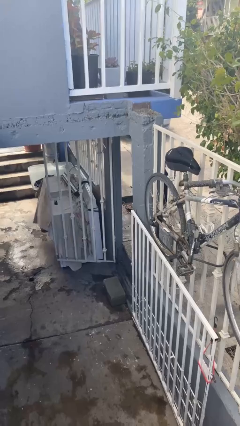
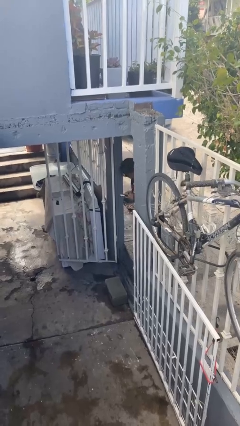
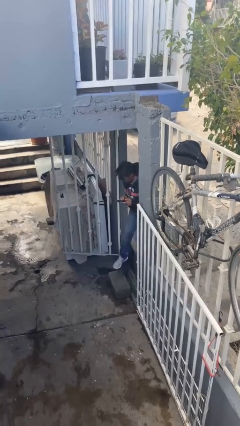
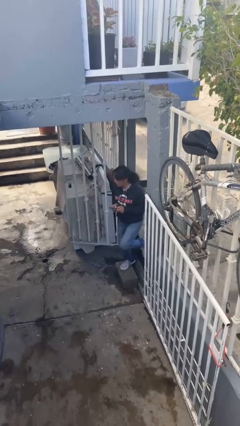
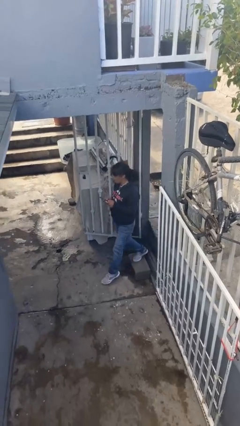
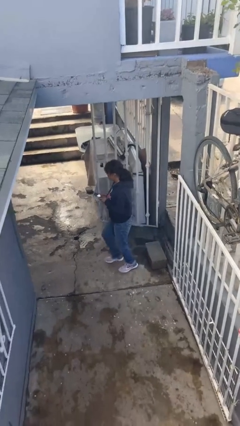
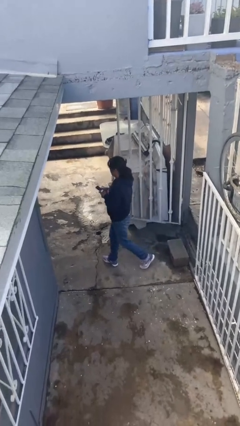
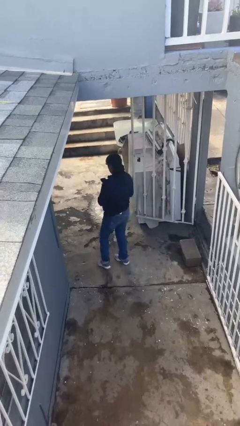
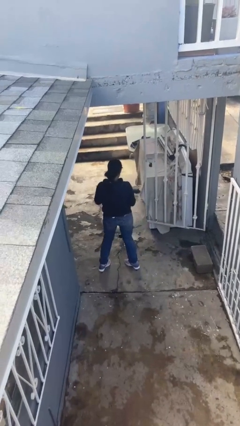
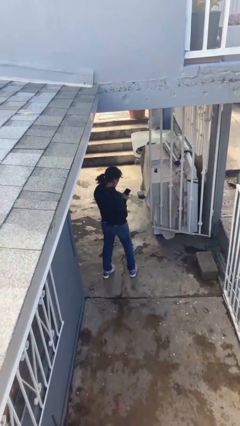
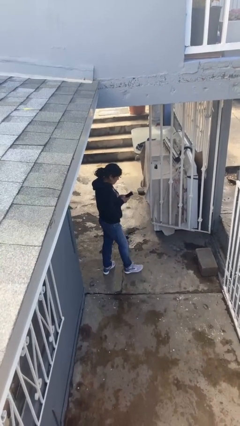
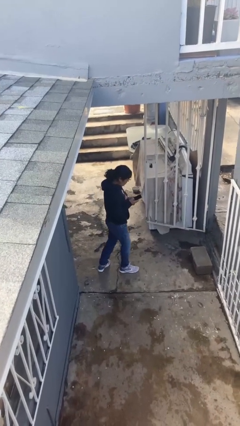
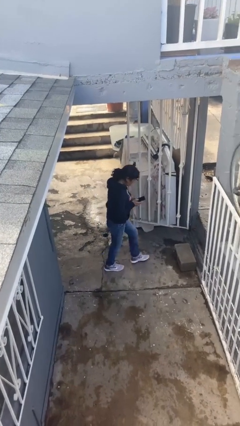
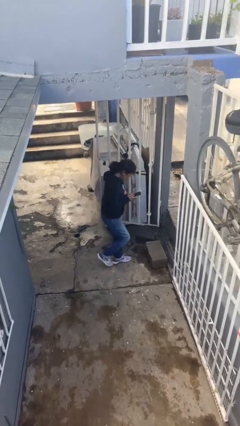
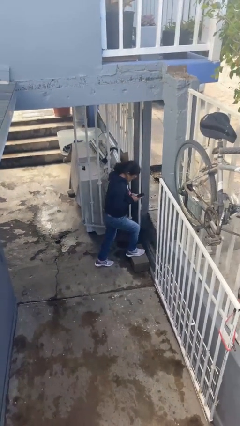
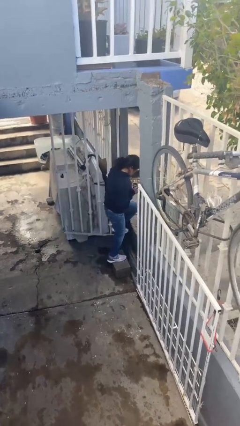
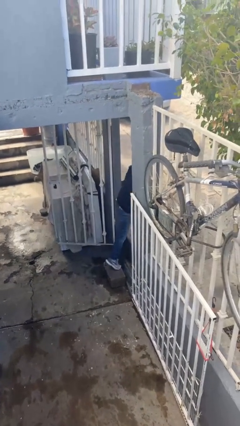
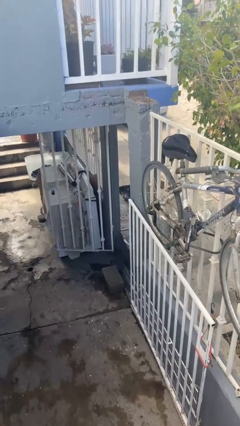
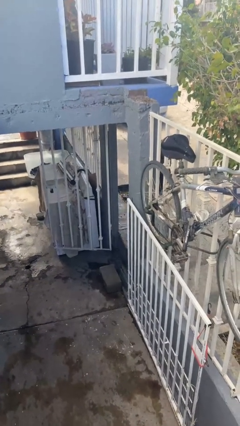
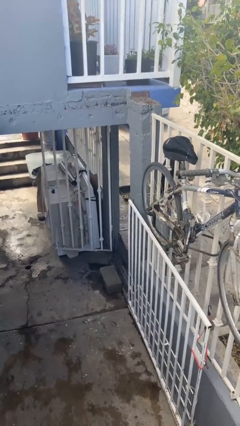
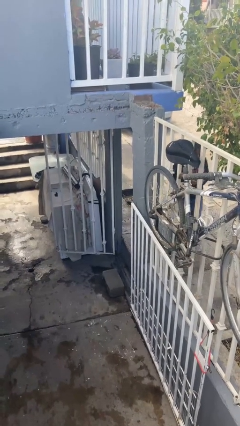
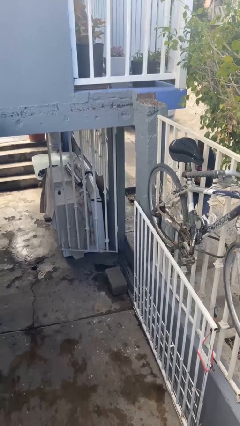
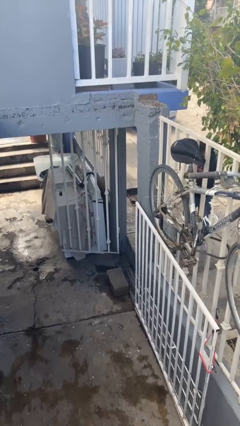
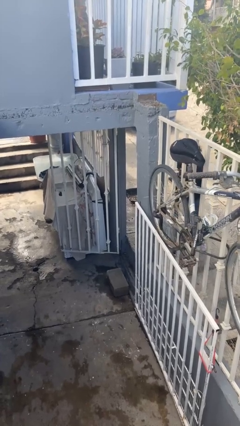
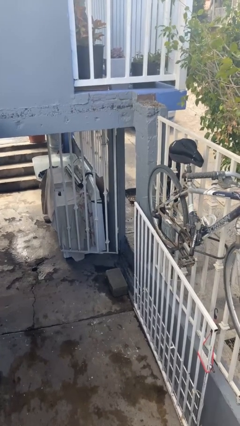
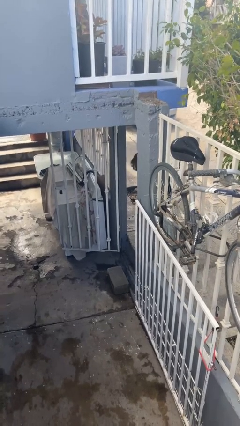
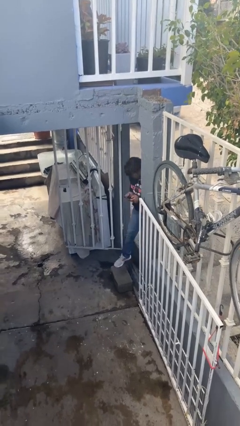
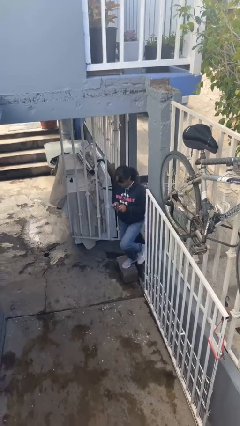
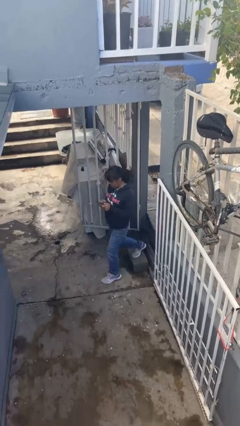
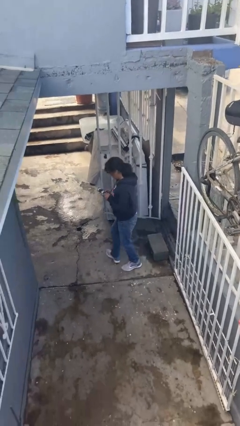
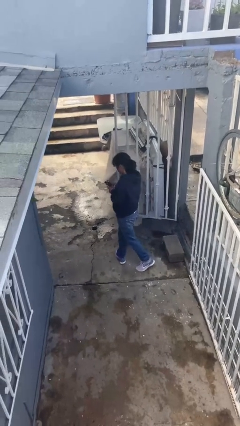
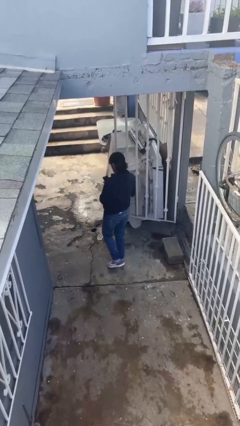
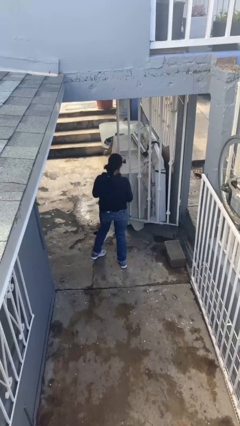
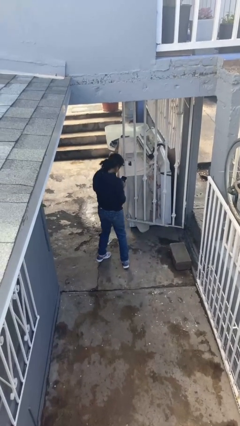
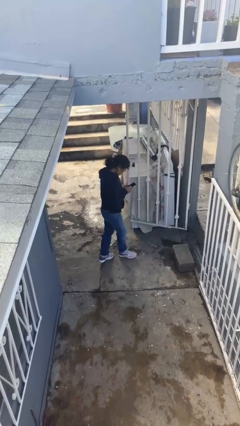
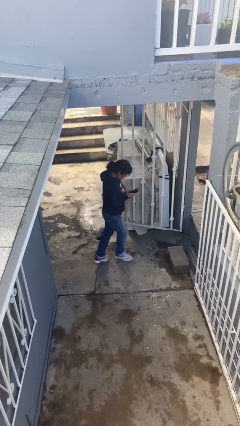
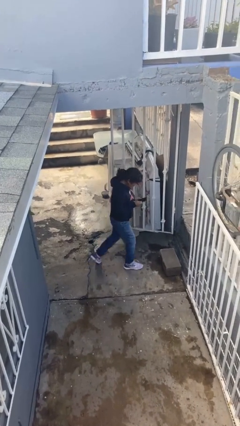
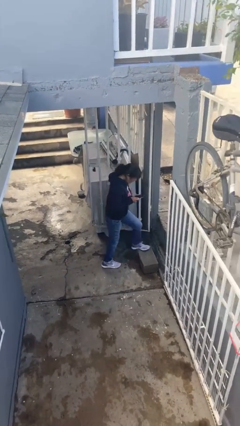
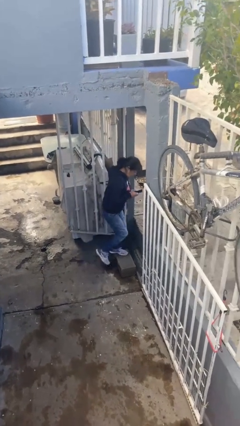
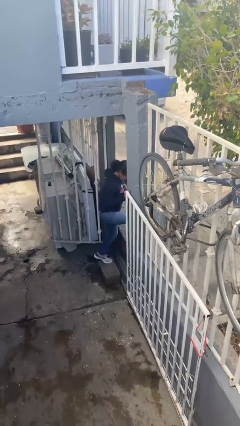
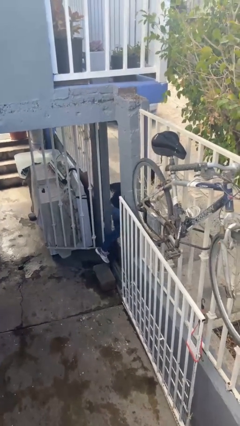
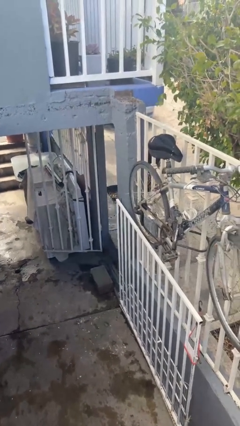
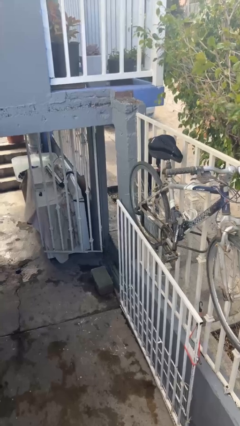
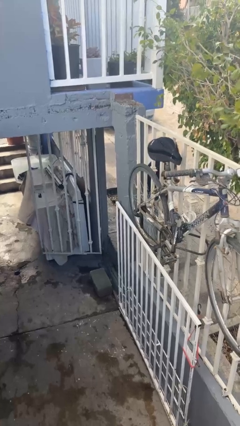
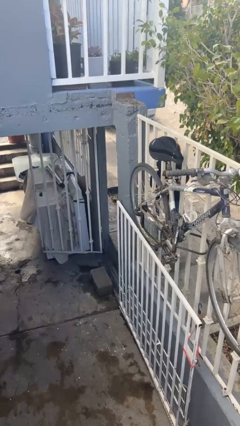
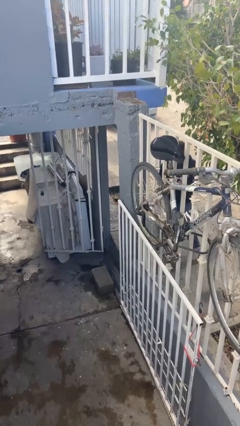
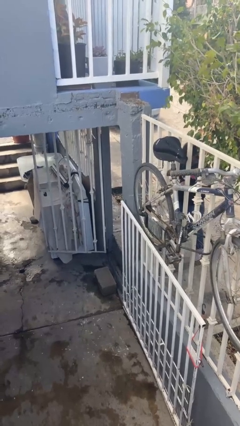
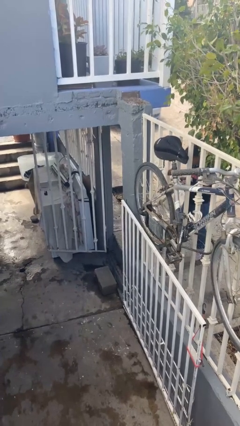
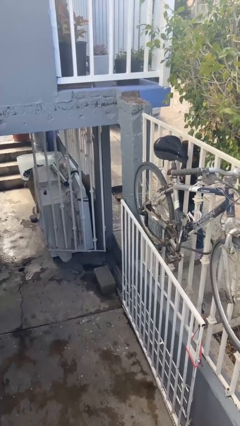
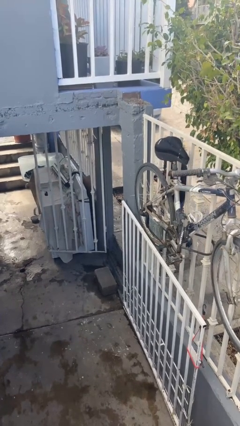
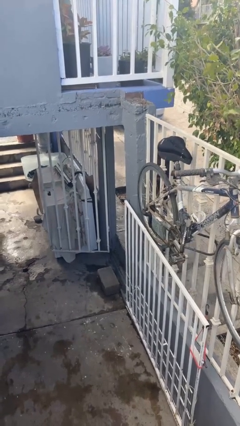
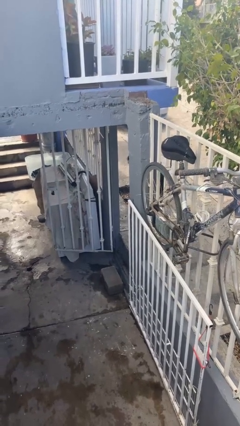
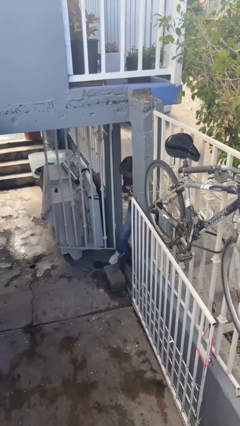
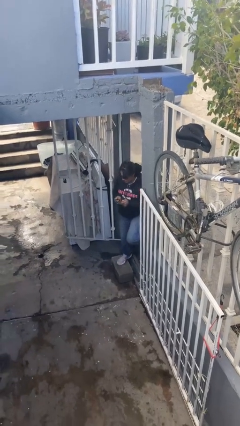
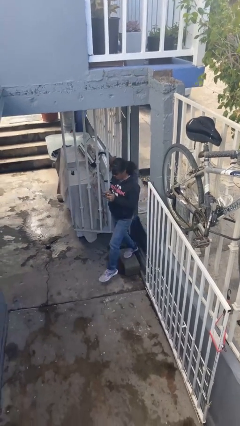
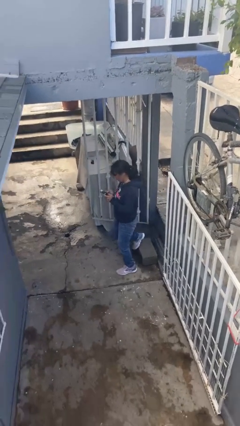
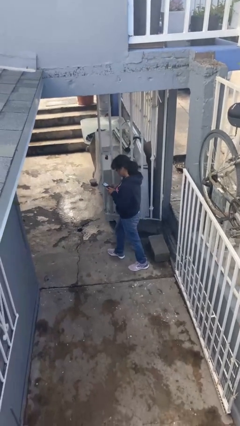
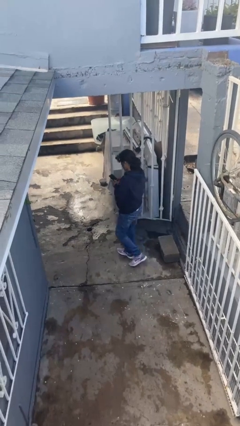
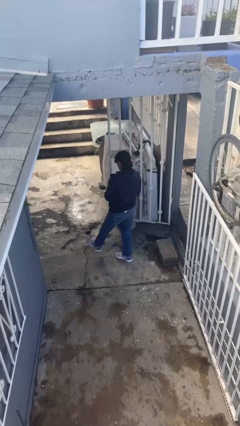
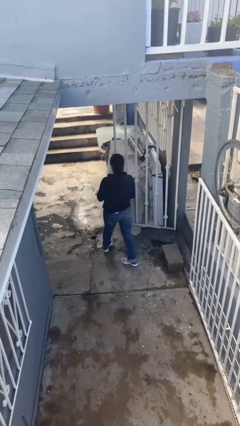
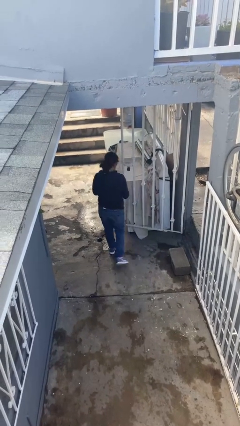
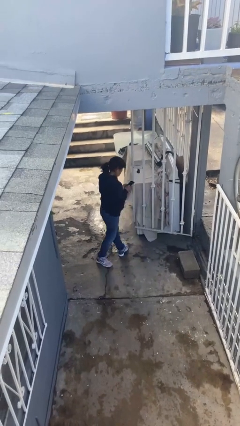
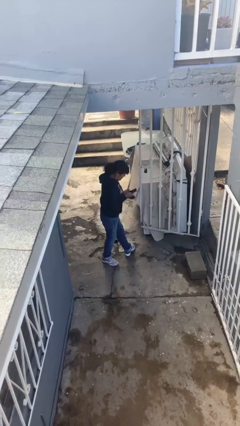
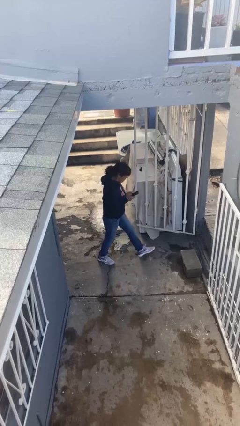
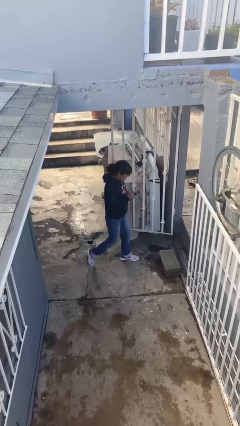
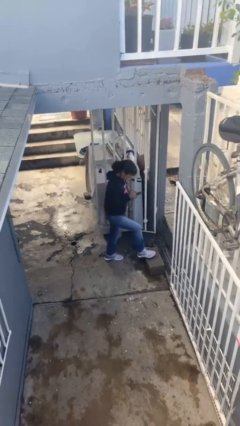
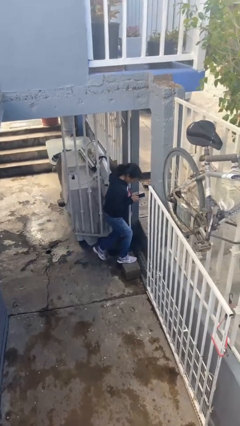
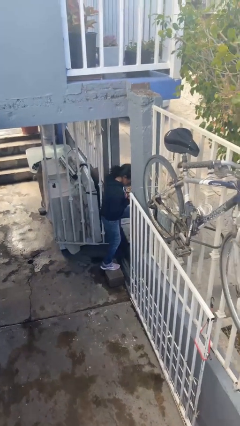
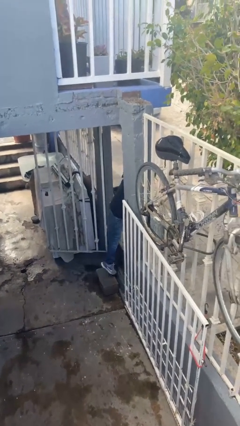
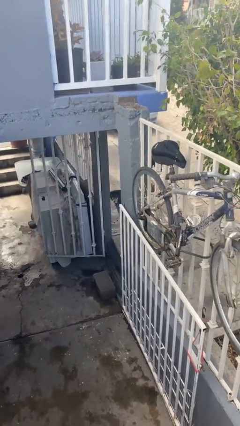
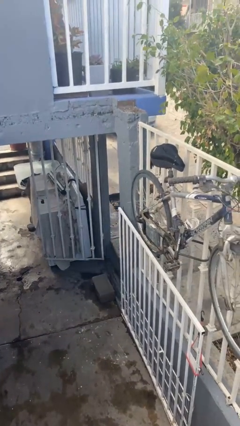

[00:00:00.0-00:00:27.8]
person texts on phone

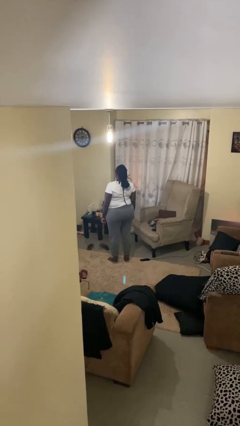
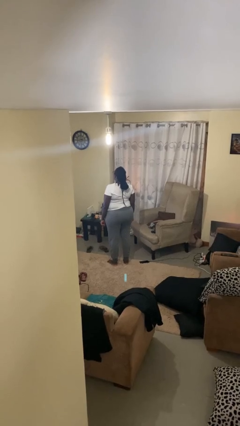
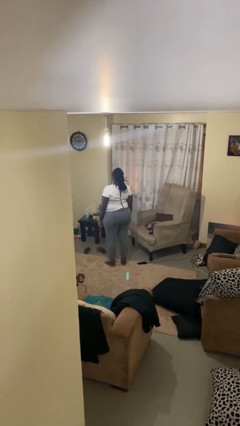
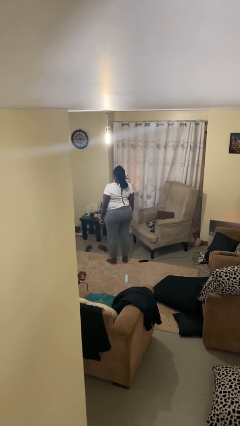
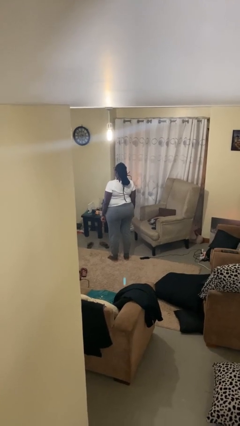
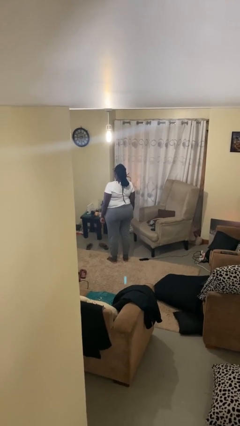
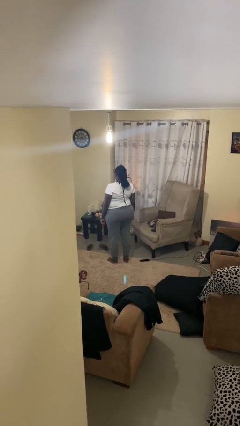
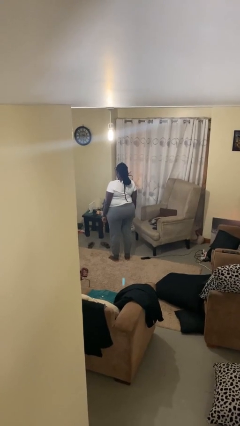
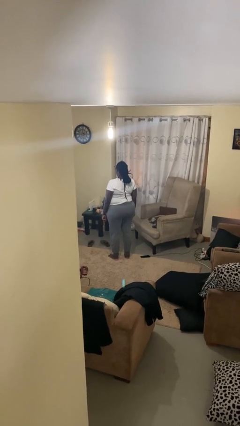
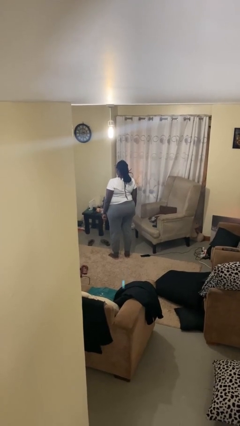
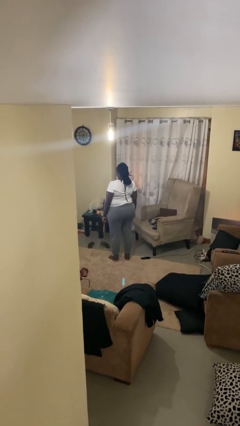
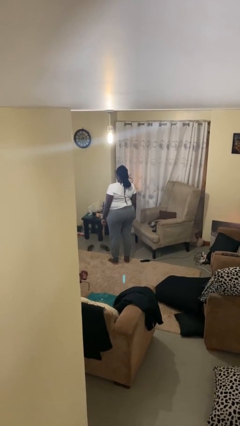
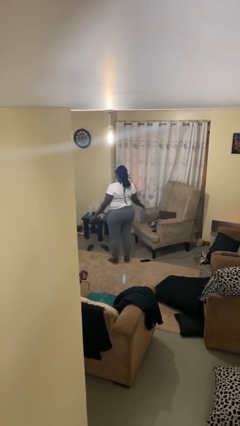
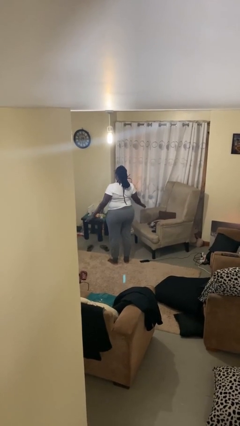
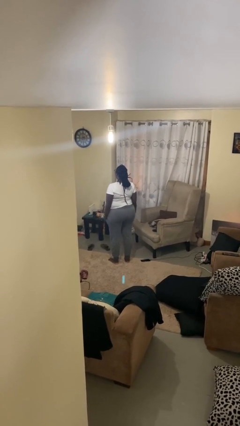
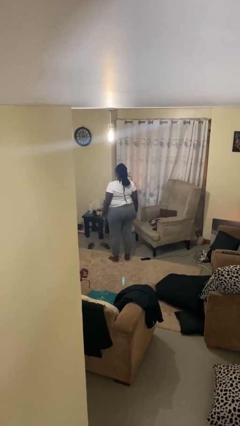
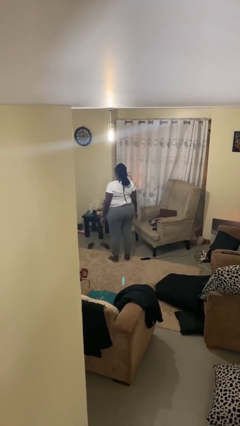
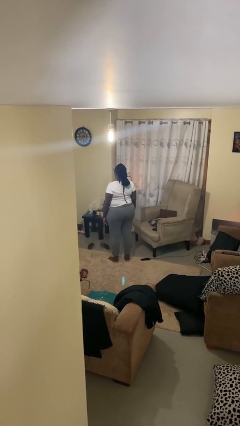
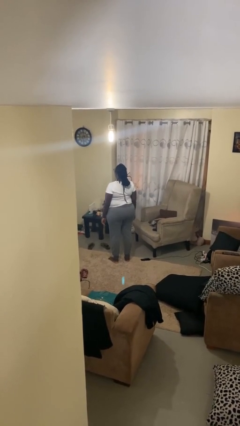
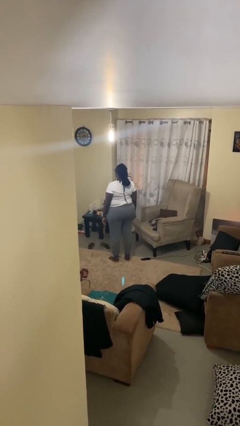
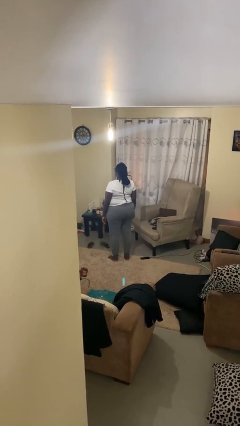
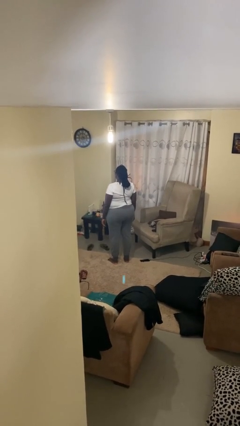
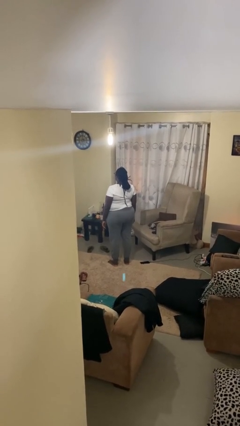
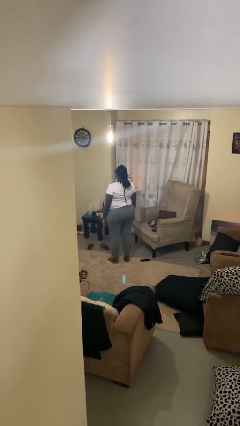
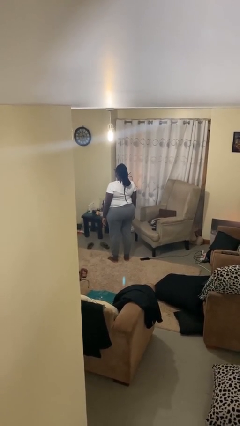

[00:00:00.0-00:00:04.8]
person slaps hands on thighs
